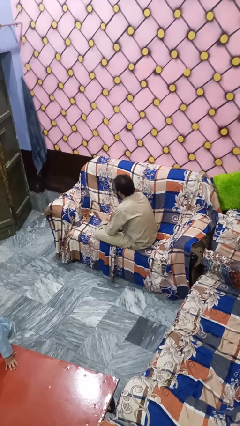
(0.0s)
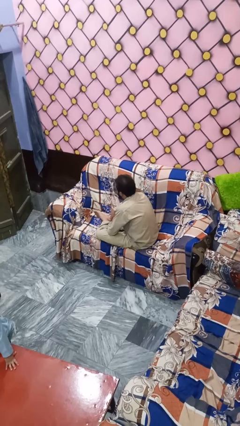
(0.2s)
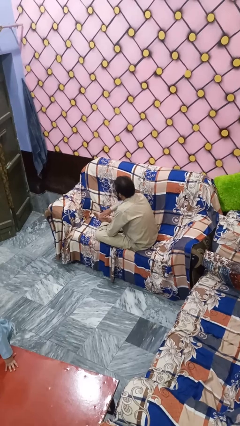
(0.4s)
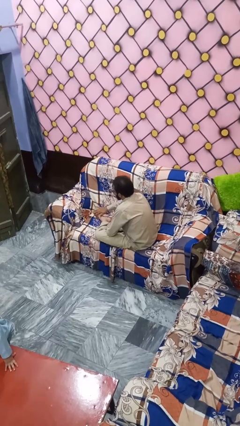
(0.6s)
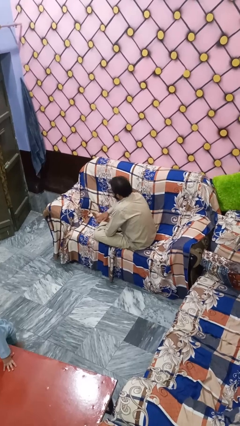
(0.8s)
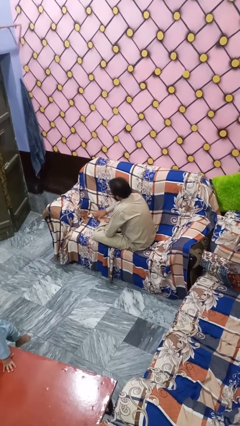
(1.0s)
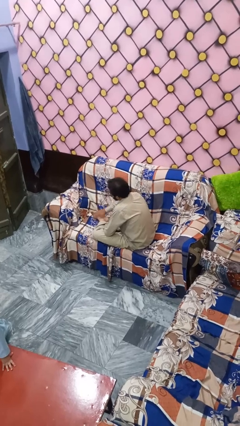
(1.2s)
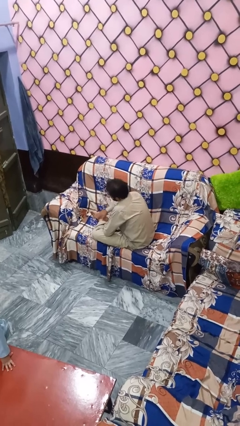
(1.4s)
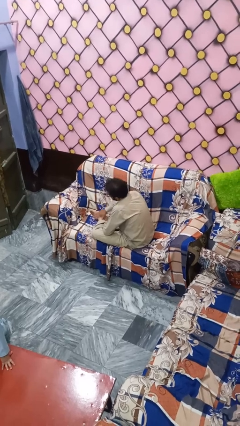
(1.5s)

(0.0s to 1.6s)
person rubs foot

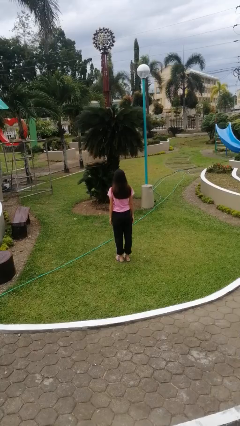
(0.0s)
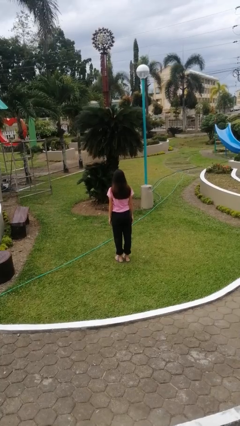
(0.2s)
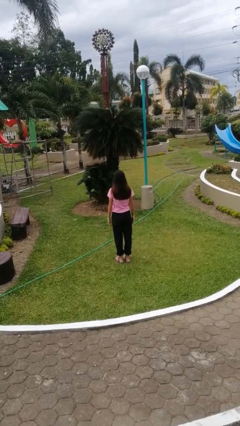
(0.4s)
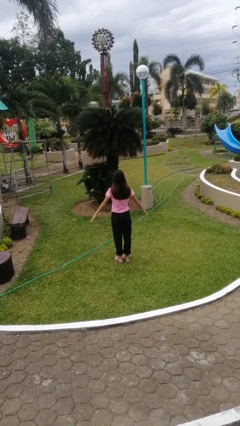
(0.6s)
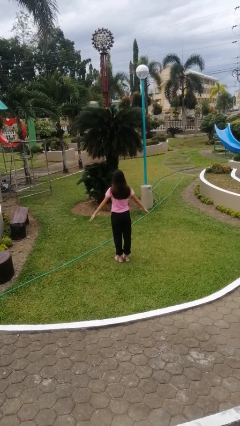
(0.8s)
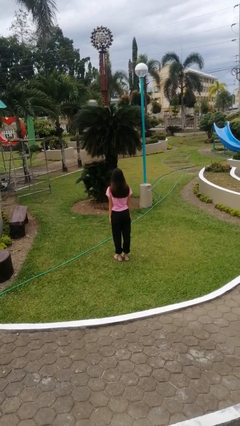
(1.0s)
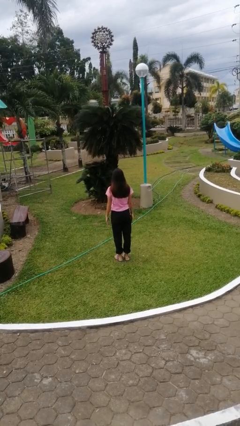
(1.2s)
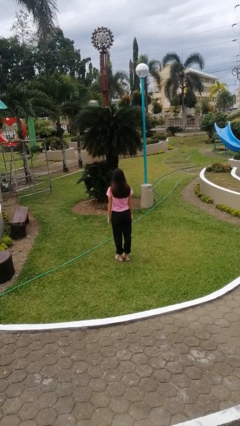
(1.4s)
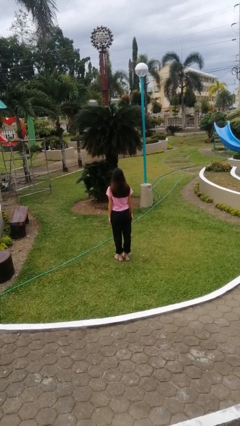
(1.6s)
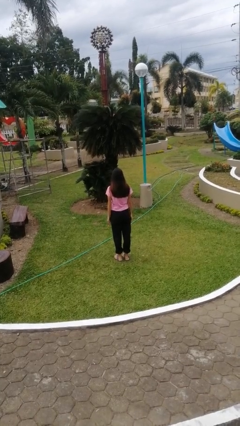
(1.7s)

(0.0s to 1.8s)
person slaps hands on thighs

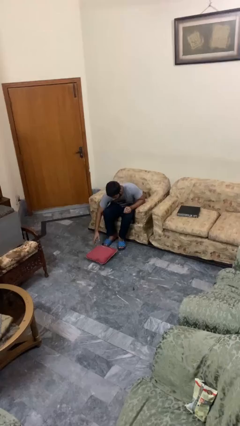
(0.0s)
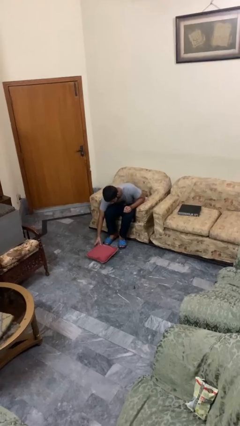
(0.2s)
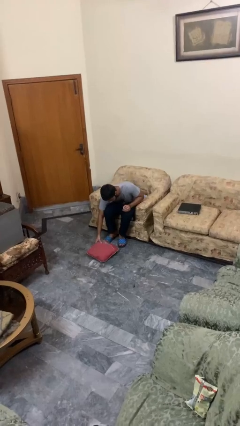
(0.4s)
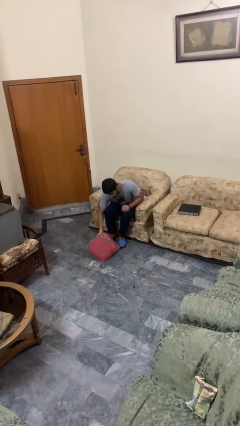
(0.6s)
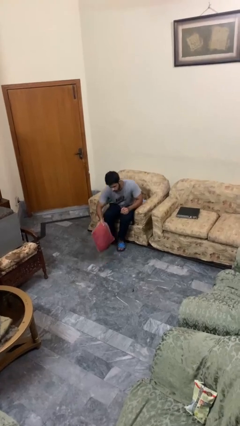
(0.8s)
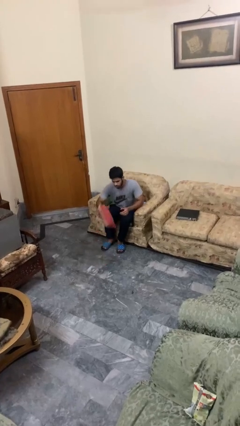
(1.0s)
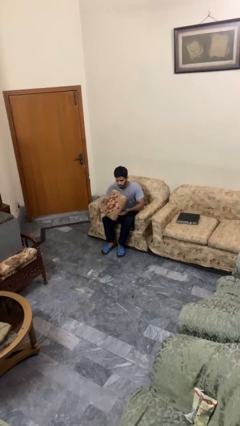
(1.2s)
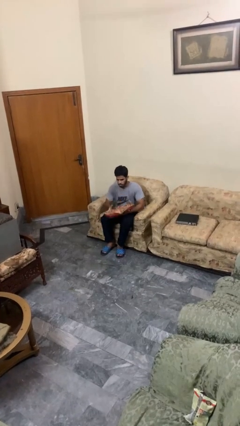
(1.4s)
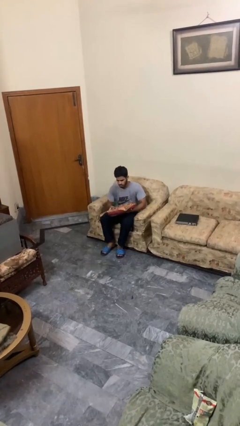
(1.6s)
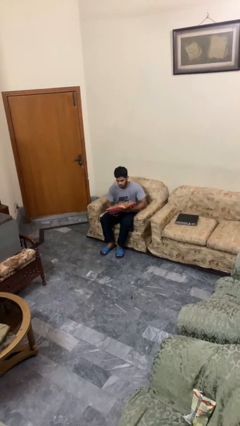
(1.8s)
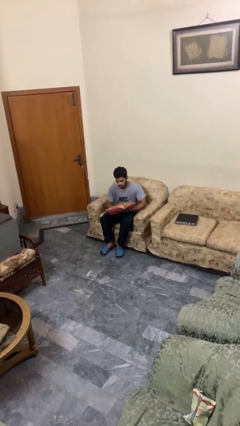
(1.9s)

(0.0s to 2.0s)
person picks up object from floor

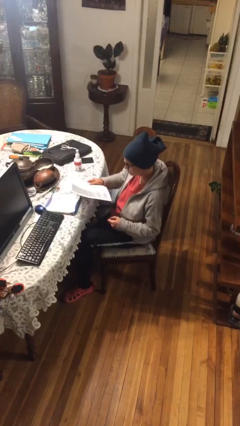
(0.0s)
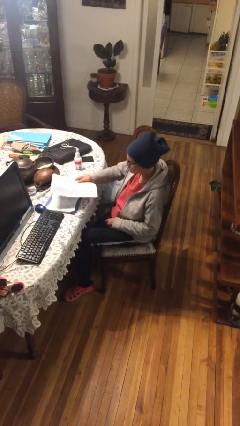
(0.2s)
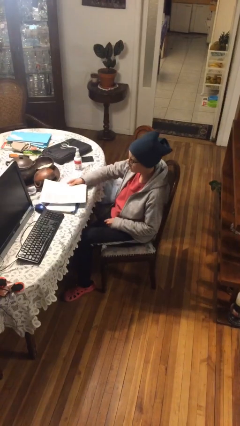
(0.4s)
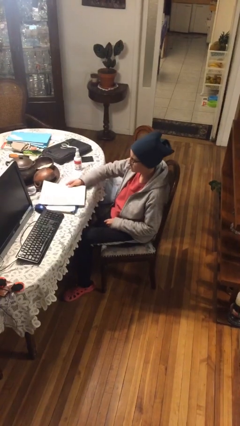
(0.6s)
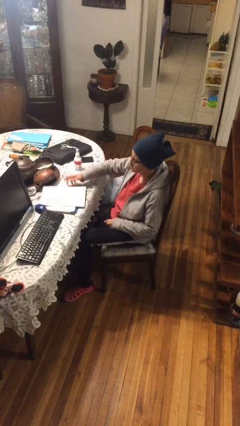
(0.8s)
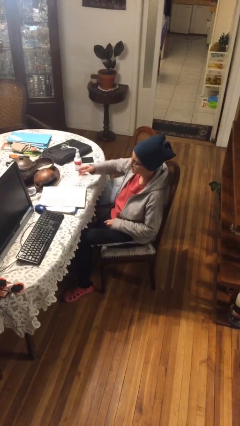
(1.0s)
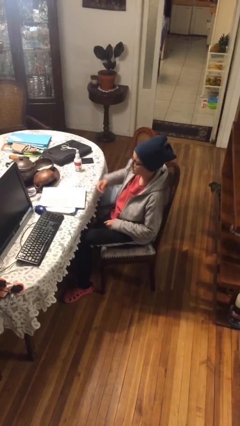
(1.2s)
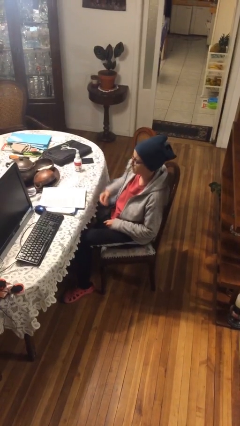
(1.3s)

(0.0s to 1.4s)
person puts down object on table

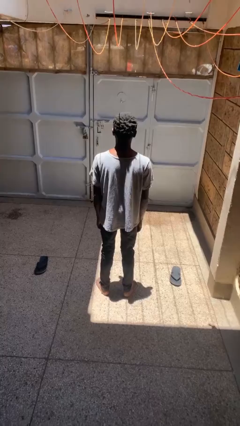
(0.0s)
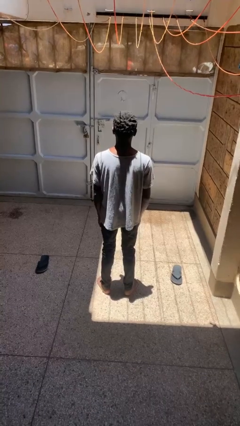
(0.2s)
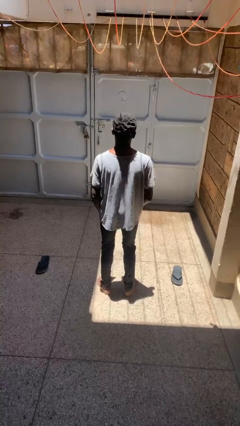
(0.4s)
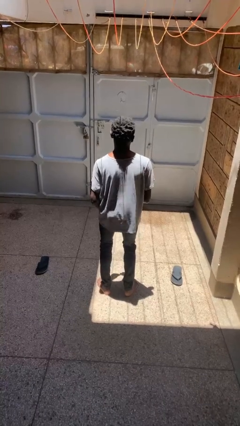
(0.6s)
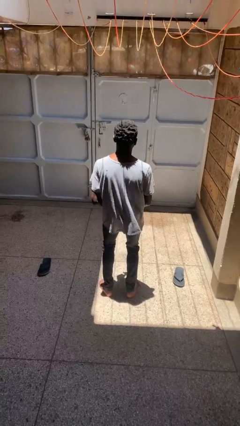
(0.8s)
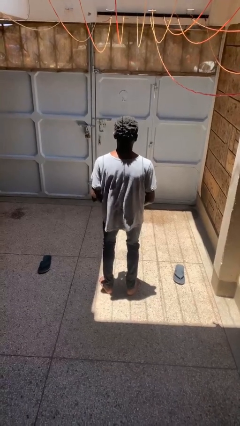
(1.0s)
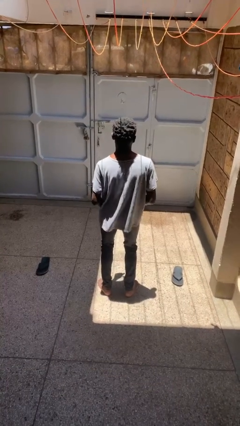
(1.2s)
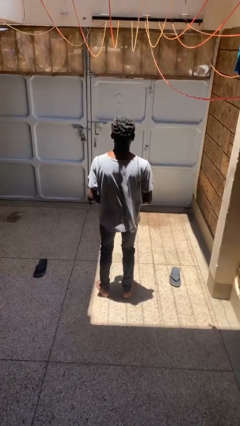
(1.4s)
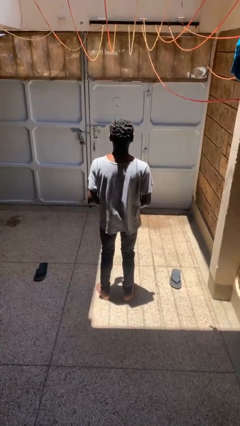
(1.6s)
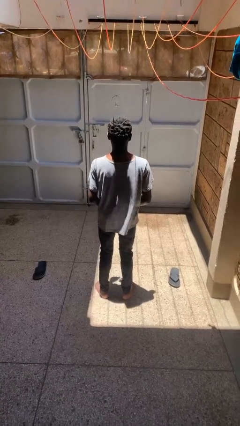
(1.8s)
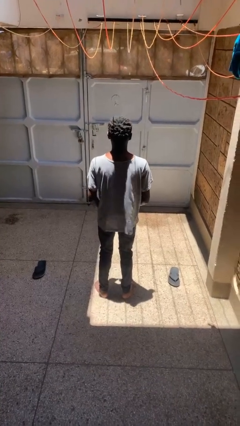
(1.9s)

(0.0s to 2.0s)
person dances in place

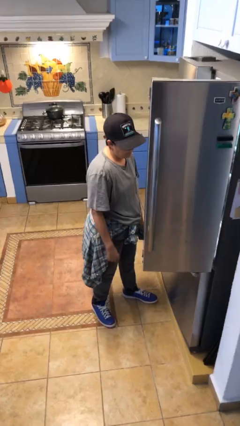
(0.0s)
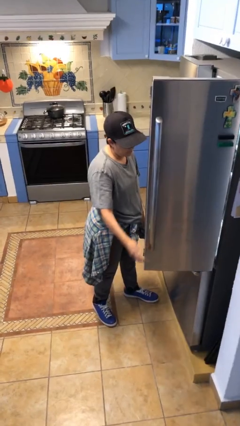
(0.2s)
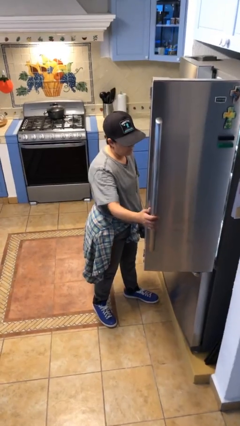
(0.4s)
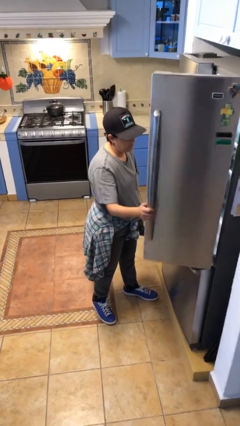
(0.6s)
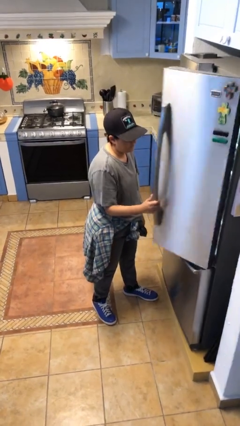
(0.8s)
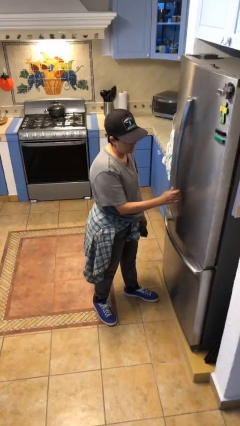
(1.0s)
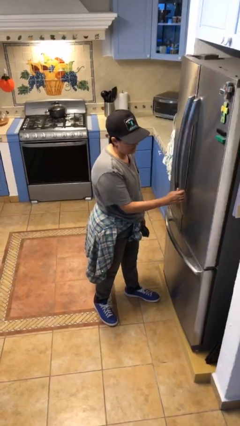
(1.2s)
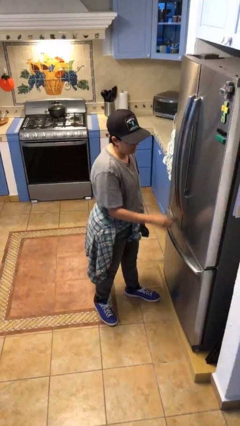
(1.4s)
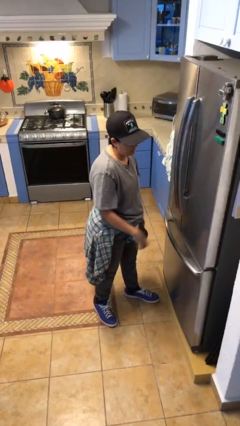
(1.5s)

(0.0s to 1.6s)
person closes refrigerator

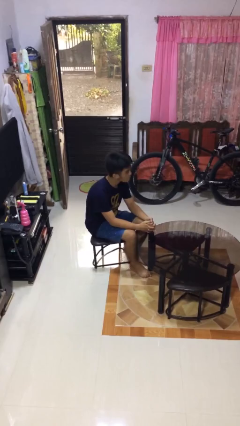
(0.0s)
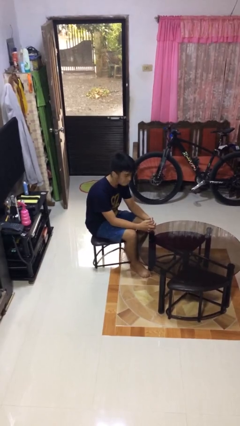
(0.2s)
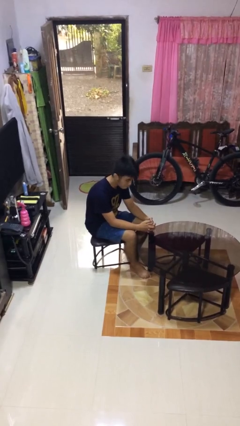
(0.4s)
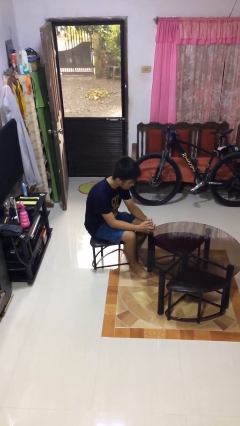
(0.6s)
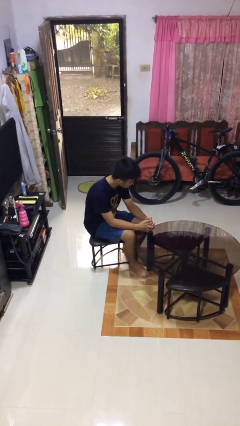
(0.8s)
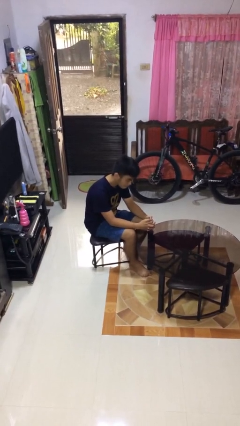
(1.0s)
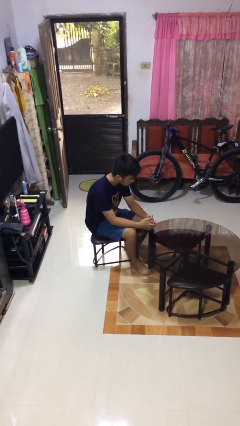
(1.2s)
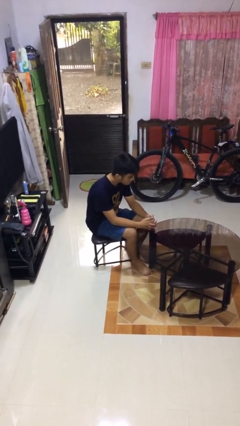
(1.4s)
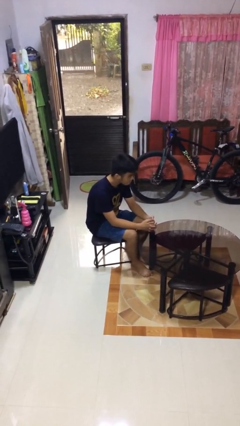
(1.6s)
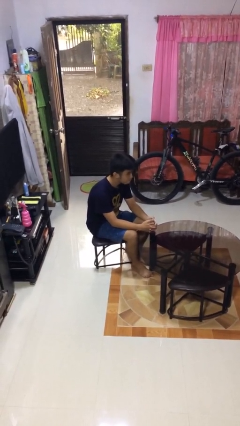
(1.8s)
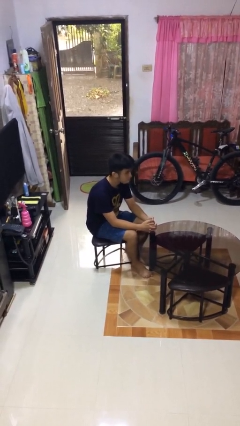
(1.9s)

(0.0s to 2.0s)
person shakes head

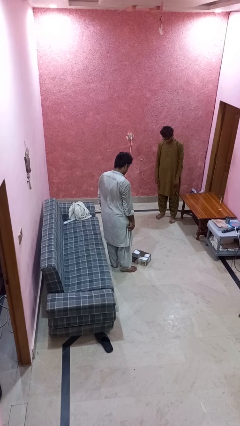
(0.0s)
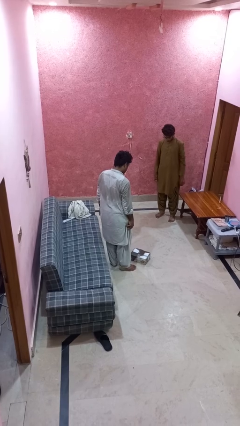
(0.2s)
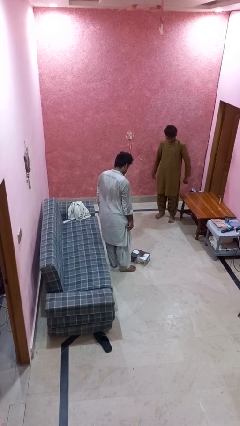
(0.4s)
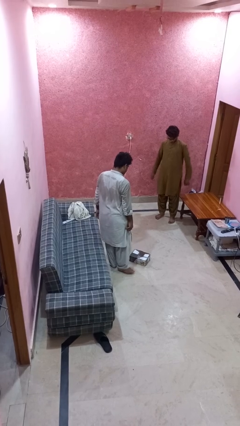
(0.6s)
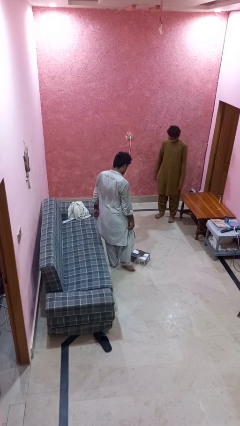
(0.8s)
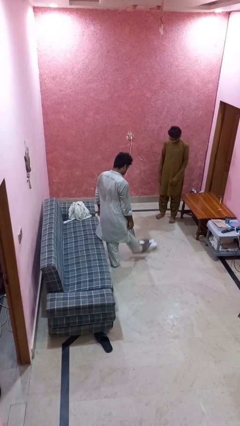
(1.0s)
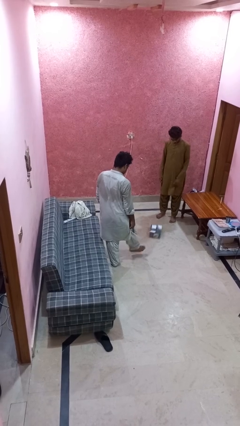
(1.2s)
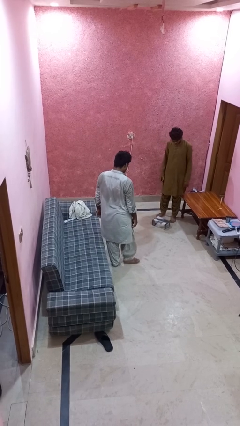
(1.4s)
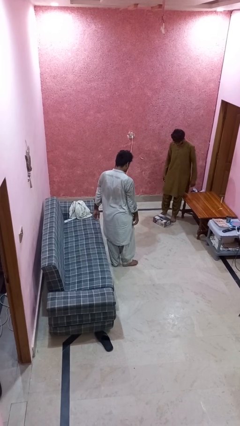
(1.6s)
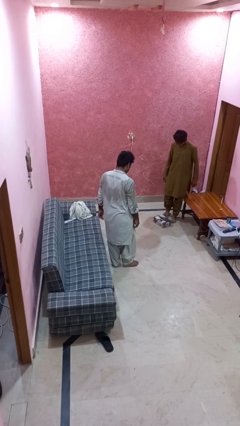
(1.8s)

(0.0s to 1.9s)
person kicks object to person

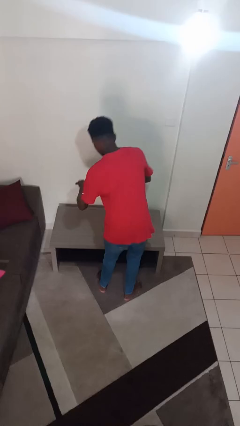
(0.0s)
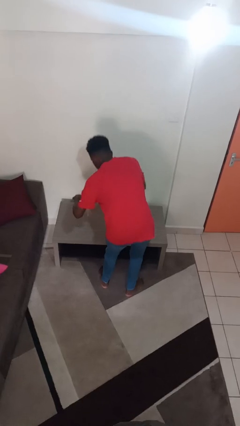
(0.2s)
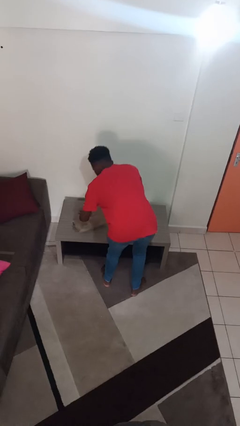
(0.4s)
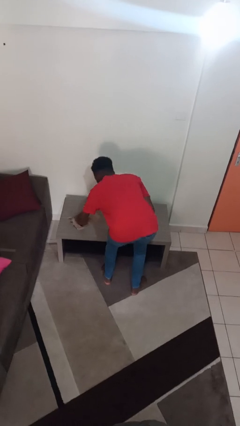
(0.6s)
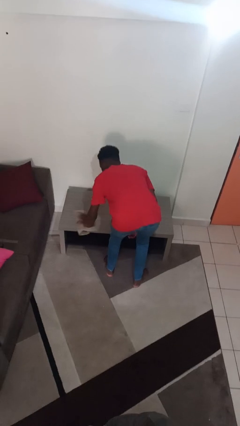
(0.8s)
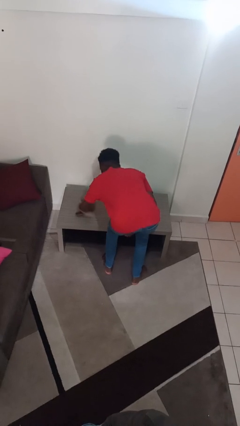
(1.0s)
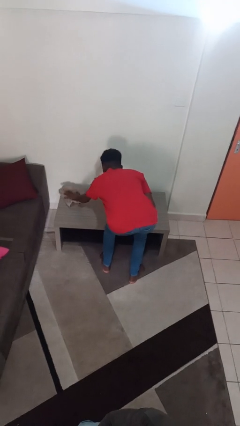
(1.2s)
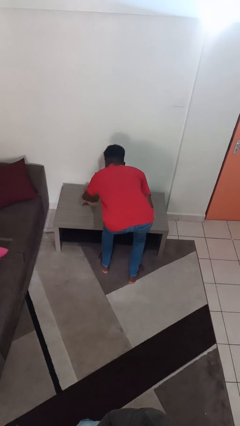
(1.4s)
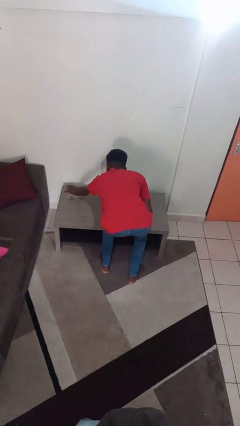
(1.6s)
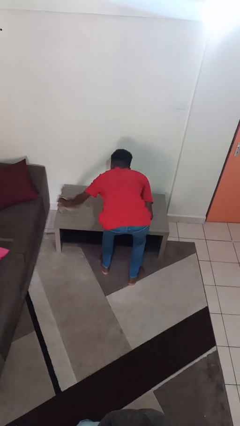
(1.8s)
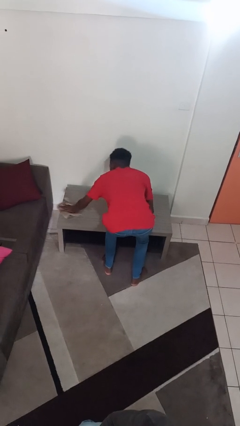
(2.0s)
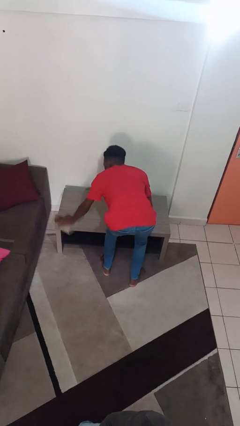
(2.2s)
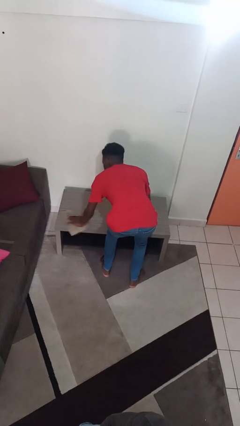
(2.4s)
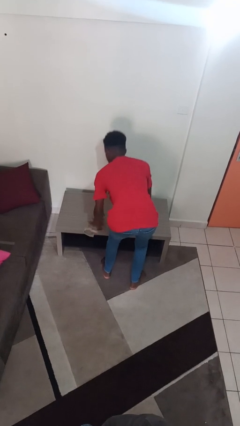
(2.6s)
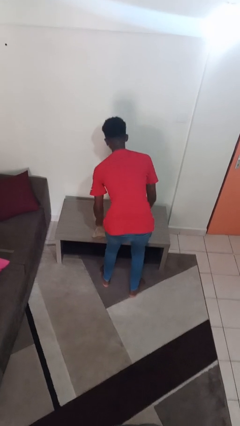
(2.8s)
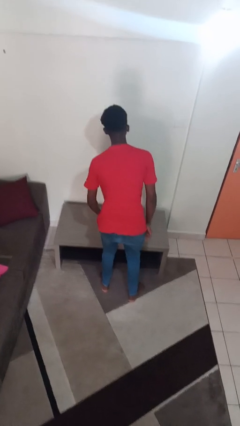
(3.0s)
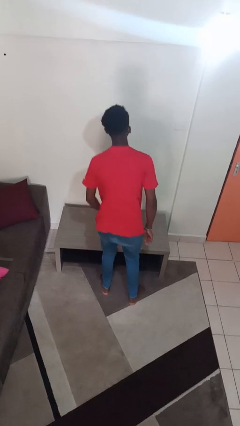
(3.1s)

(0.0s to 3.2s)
person cleans table with rag
